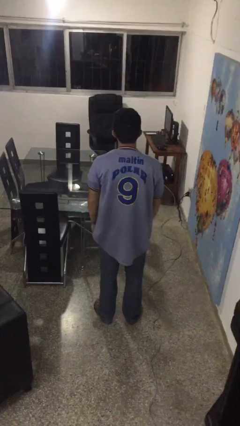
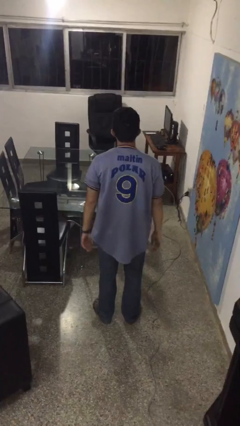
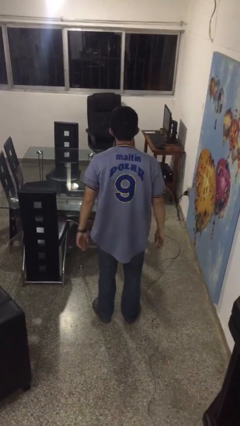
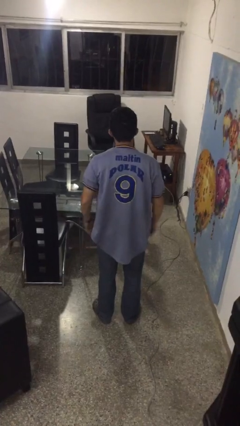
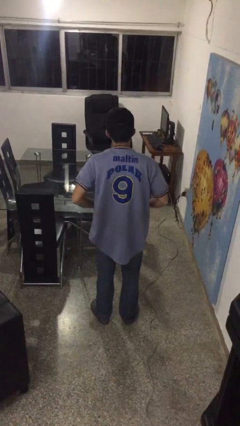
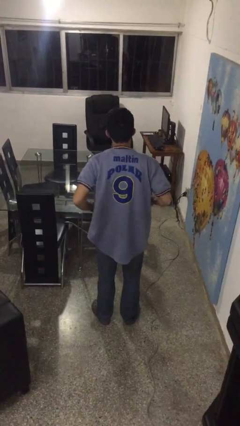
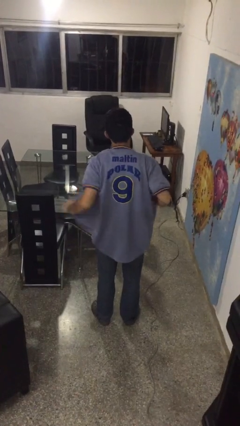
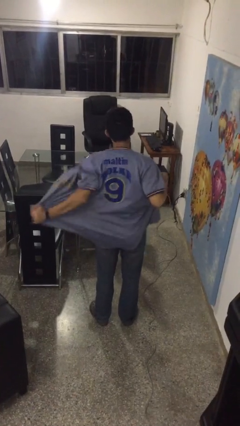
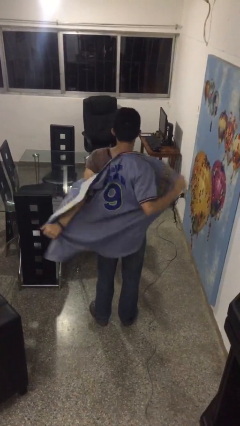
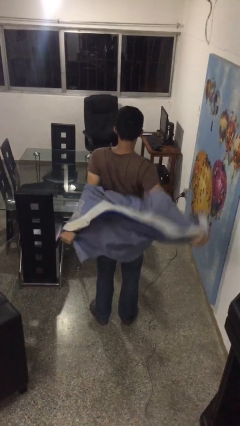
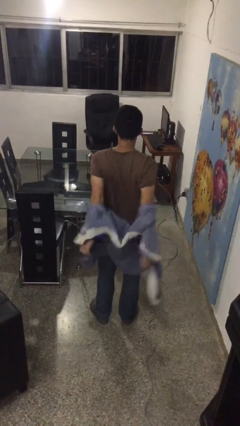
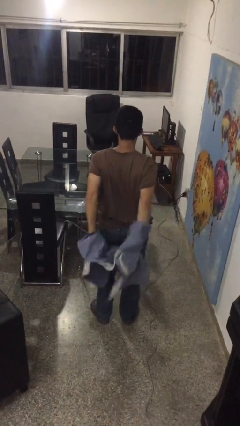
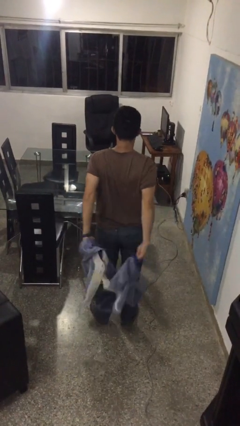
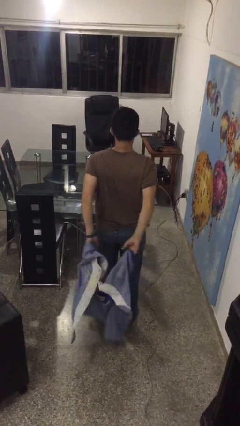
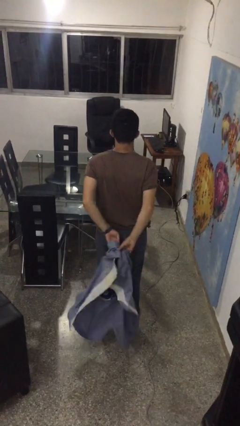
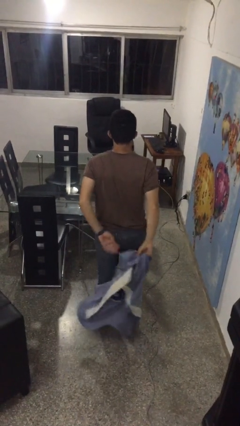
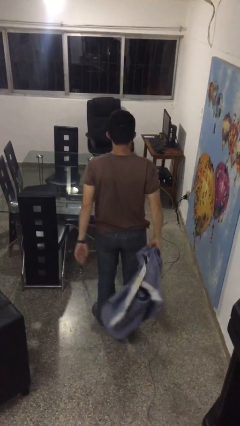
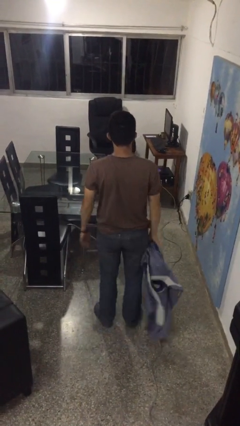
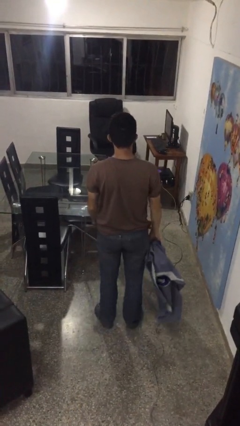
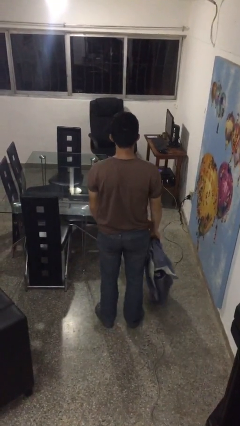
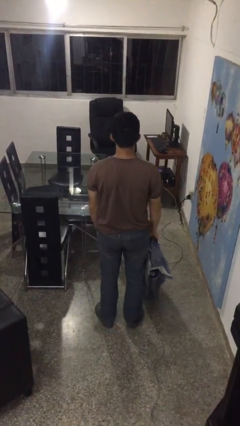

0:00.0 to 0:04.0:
person takes off shirt

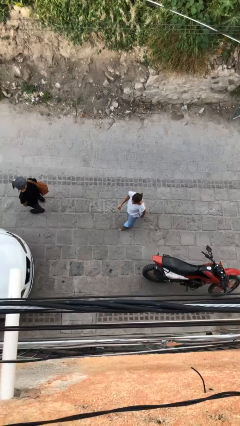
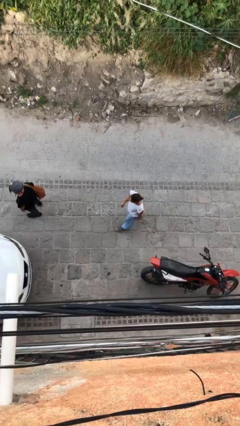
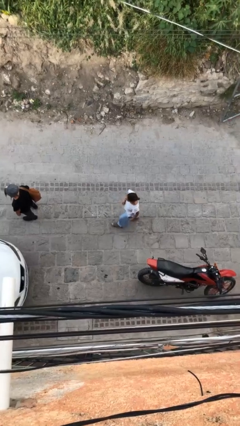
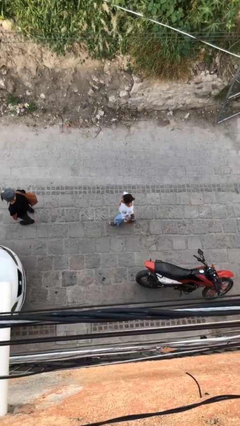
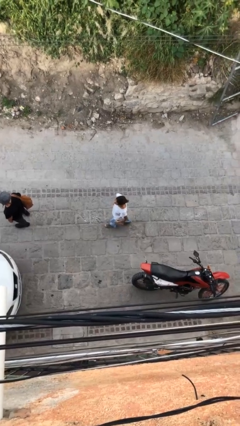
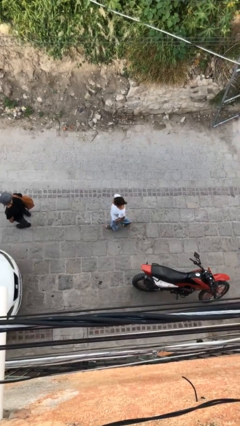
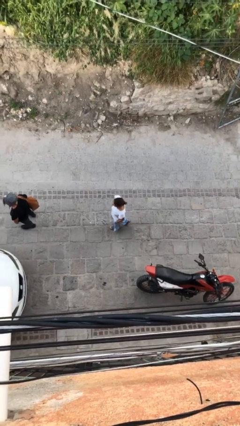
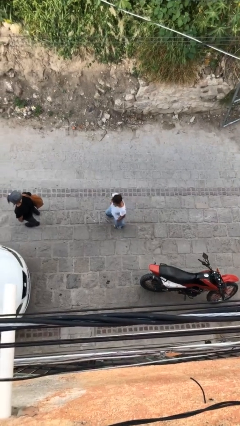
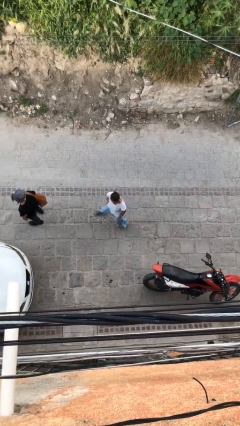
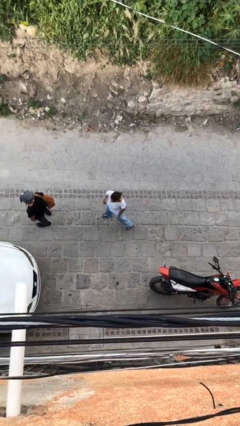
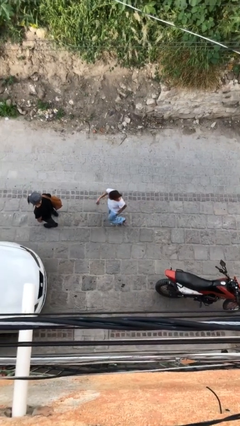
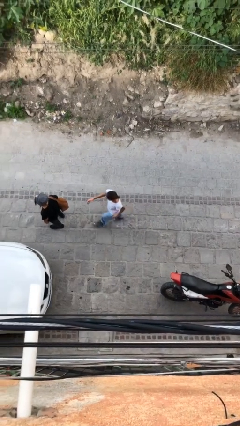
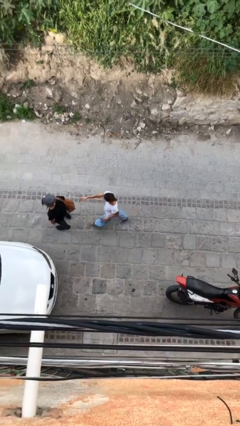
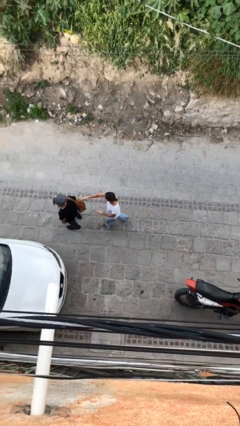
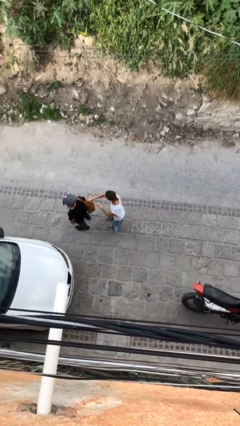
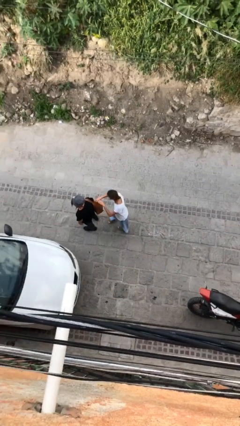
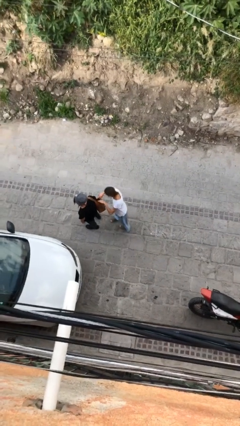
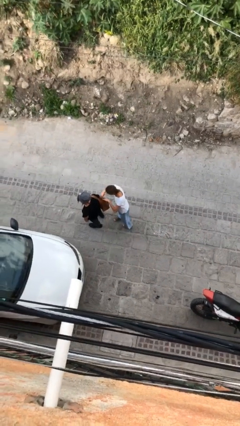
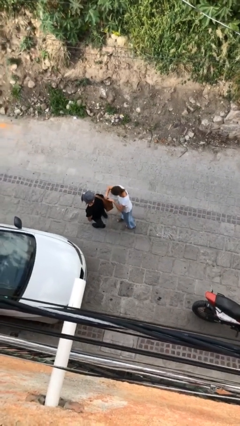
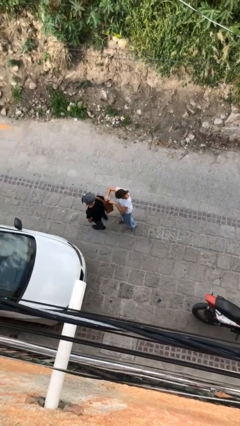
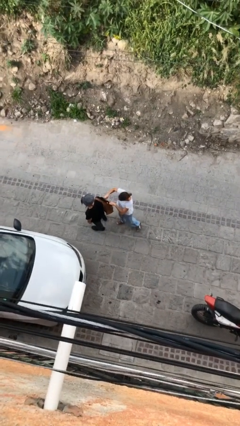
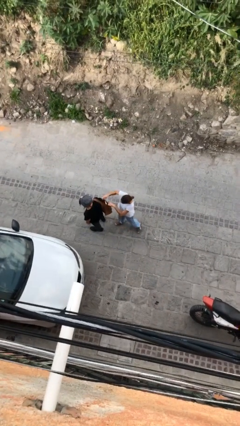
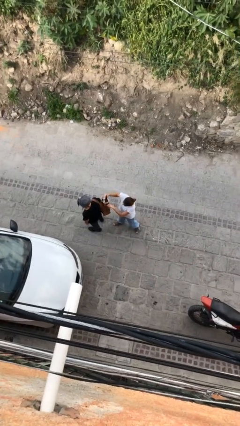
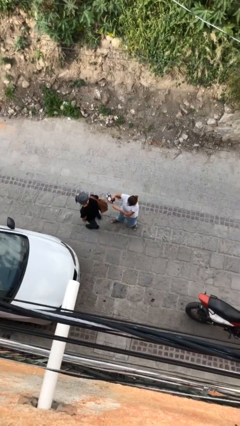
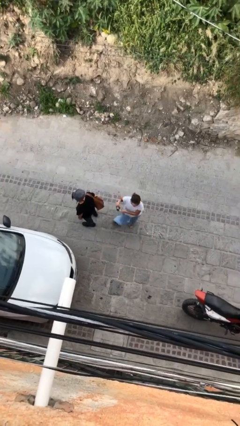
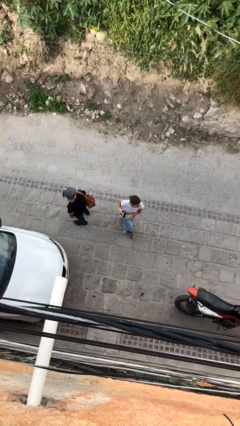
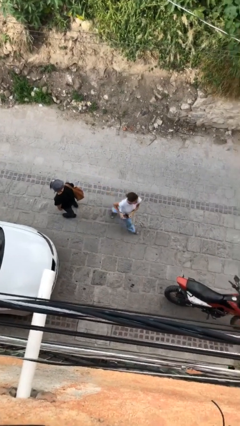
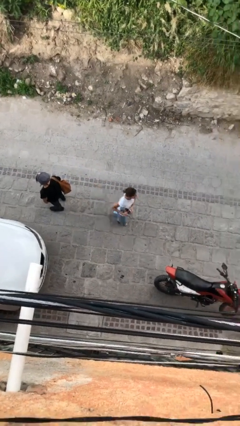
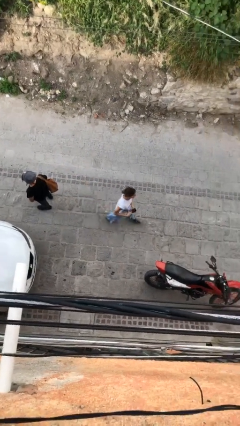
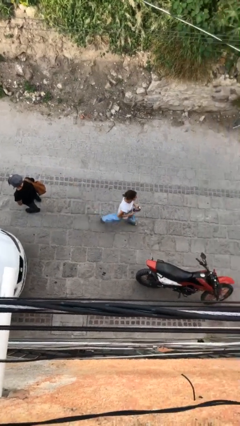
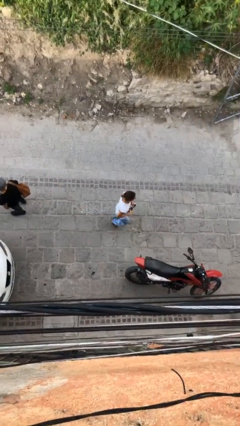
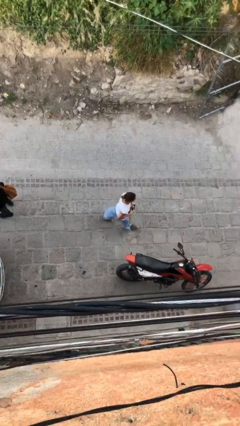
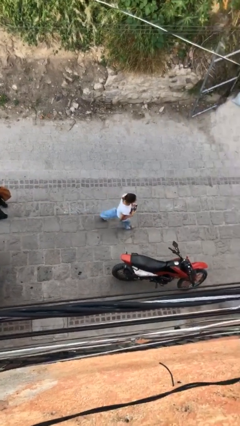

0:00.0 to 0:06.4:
person steals object from person

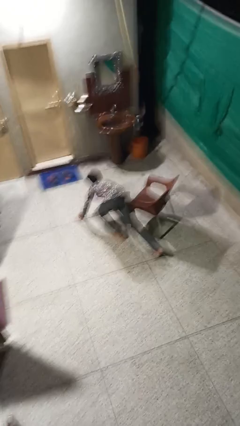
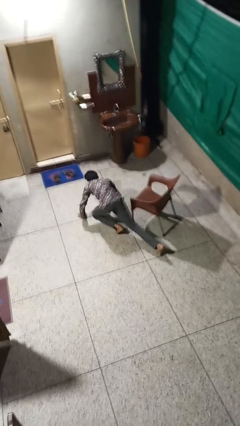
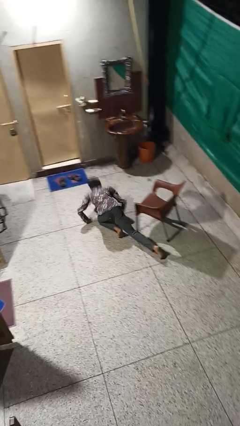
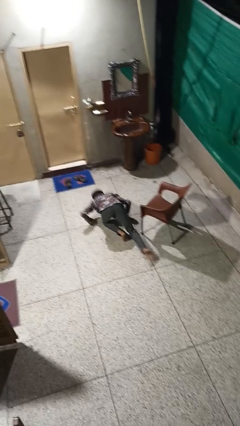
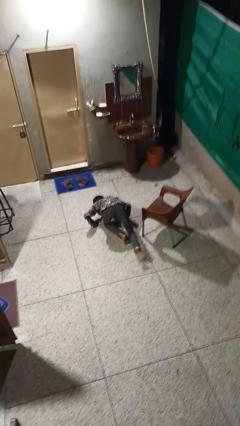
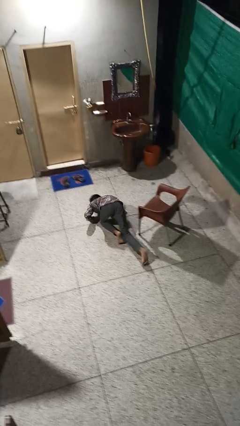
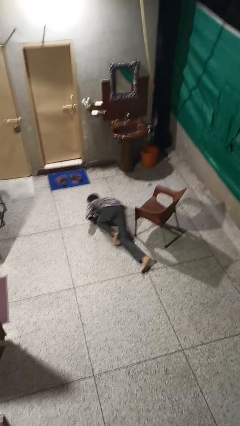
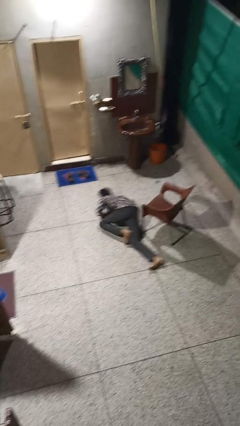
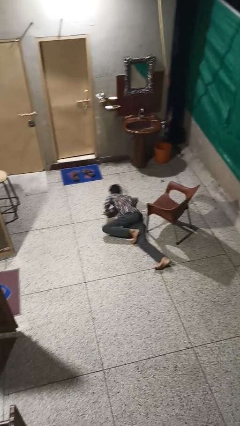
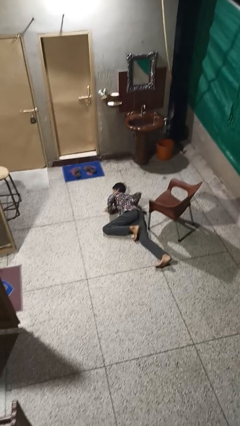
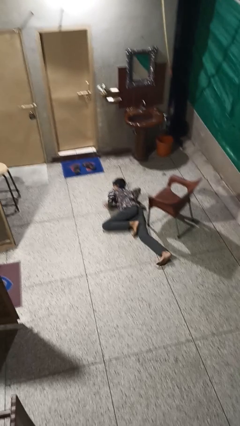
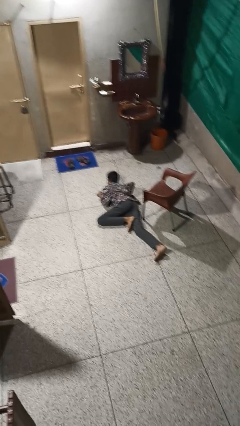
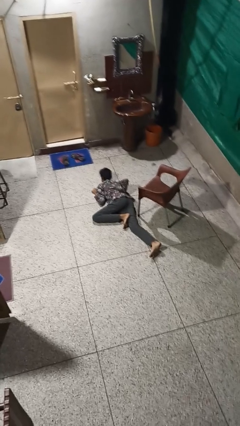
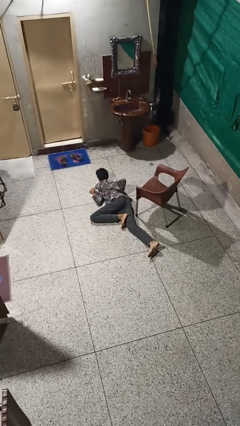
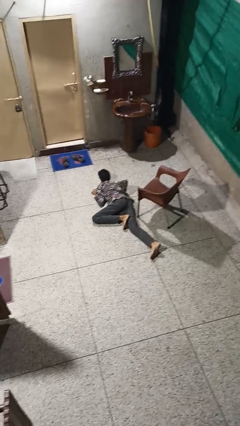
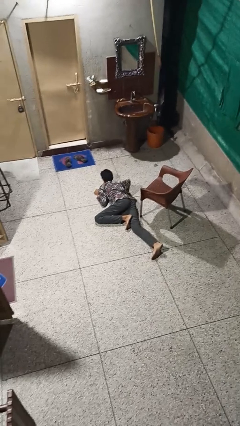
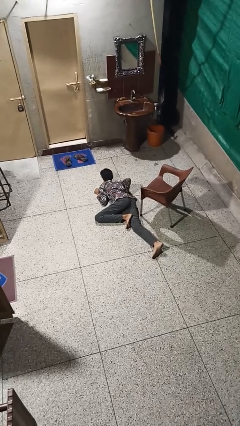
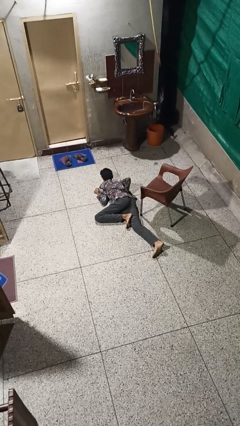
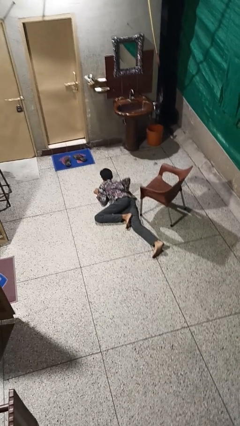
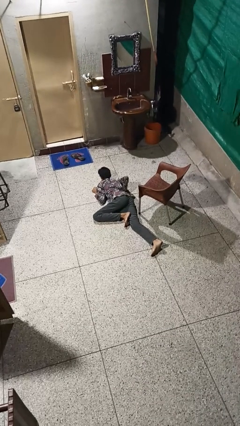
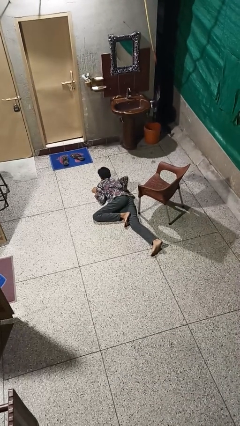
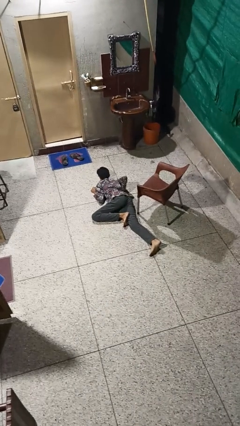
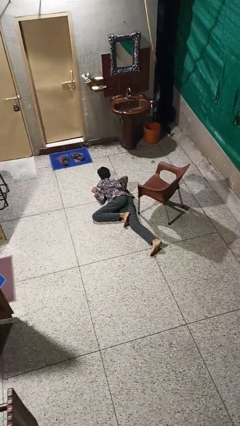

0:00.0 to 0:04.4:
person lies down on floor

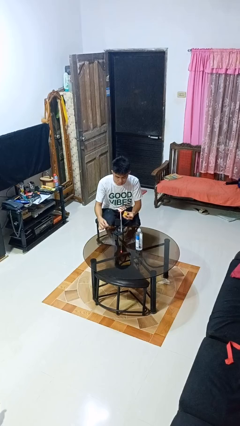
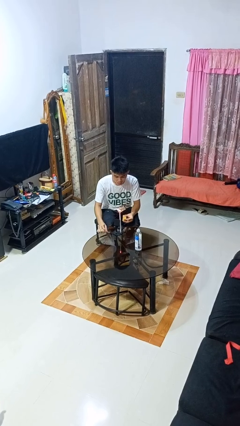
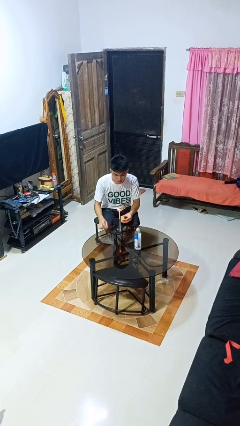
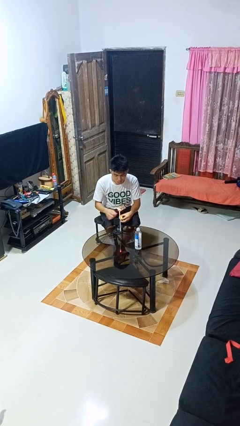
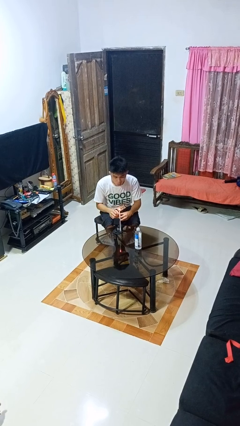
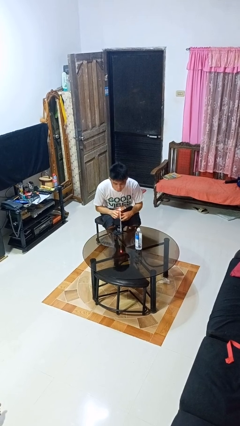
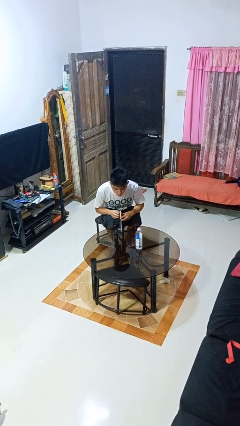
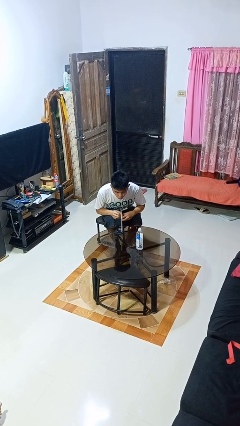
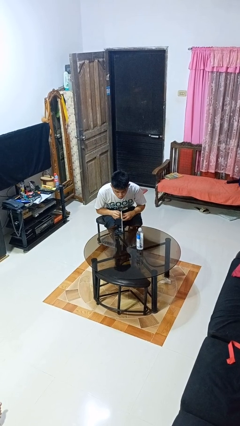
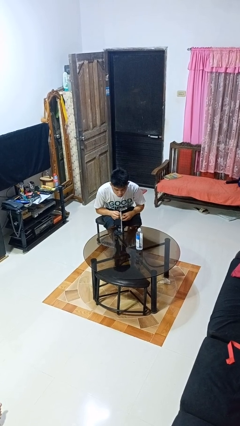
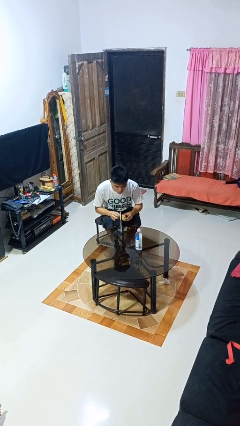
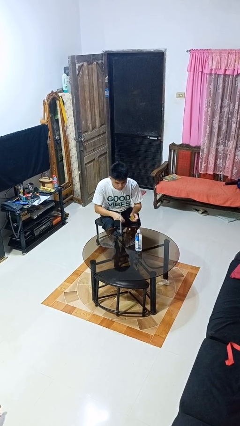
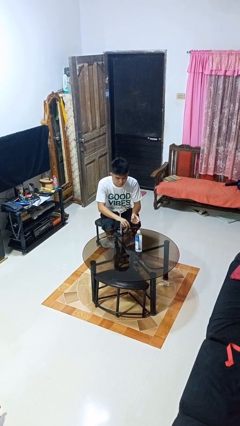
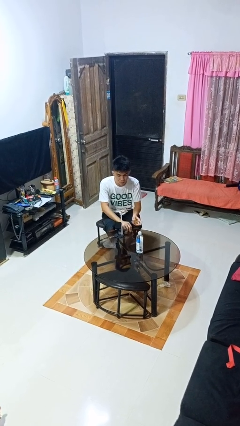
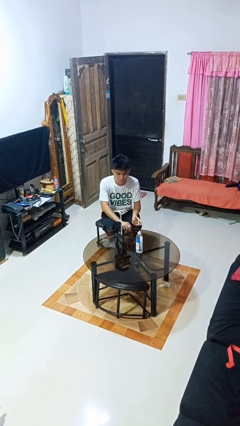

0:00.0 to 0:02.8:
person extinguishes candle

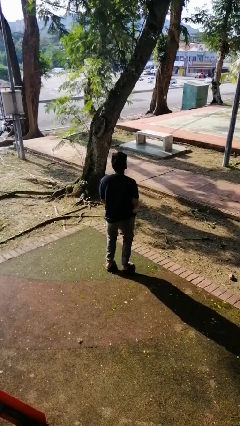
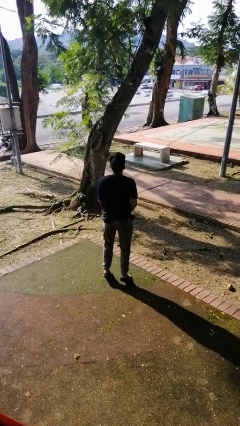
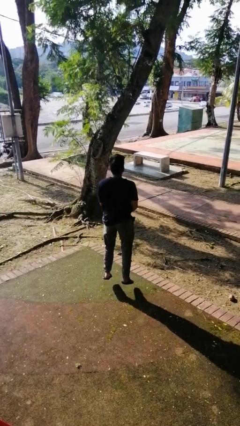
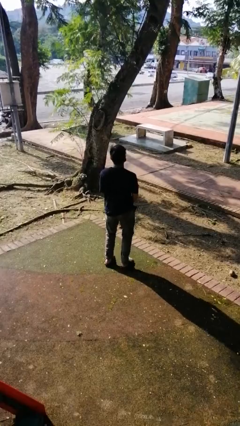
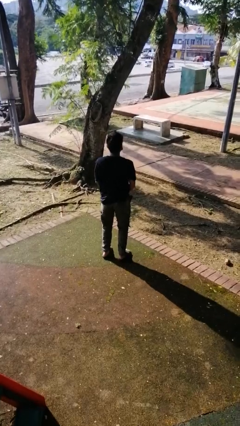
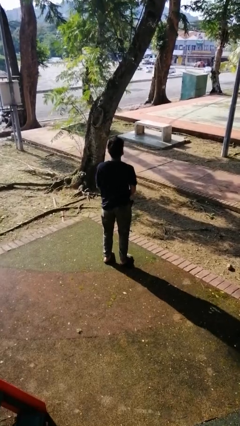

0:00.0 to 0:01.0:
person jumps
